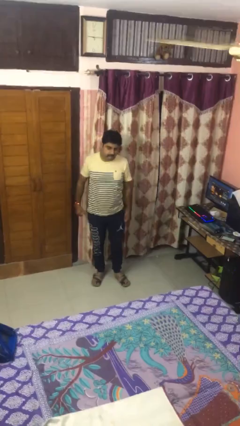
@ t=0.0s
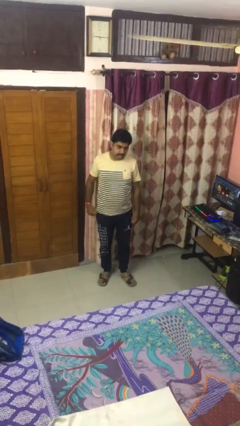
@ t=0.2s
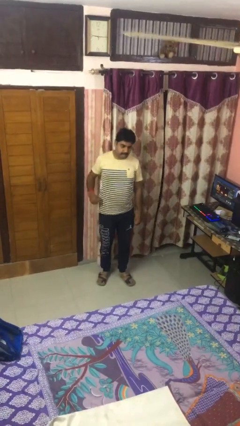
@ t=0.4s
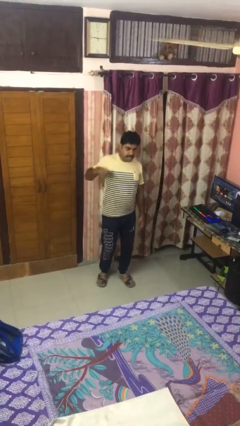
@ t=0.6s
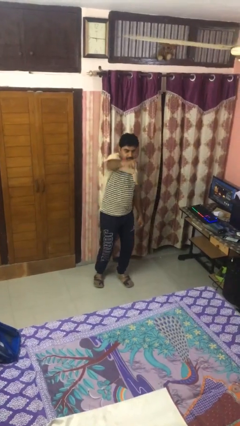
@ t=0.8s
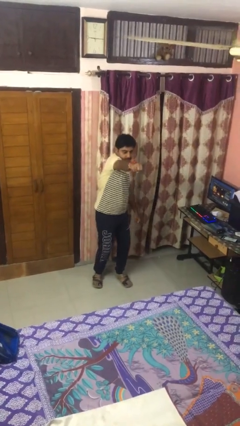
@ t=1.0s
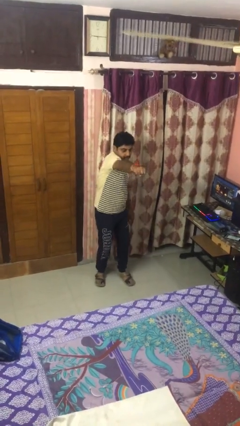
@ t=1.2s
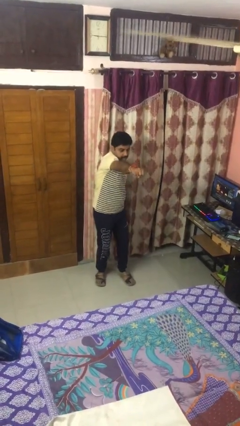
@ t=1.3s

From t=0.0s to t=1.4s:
person punches

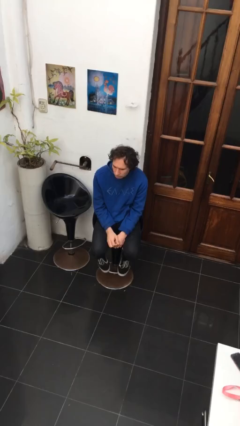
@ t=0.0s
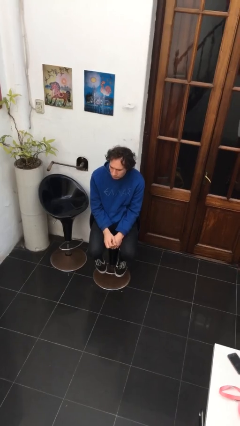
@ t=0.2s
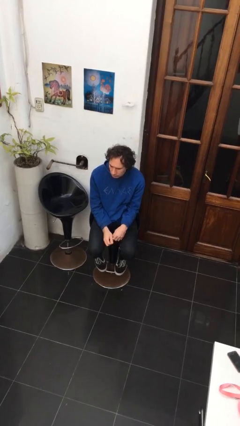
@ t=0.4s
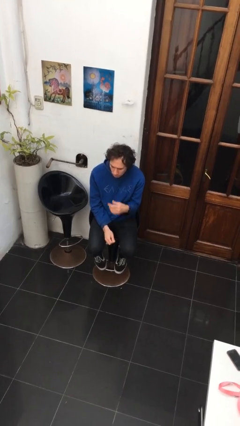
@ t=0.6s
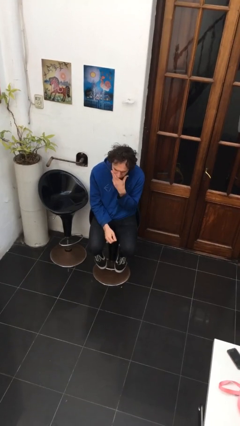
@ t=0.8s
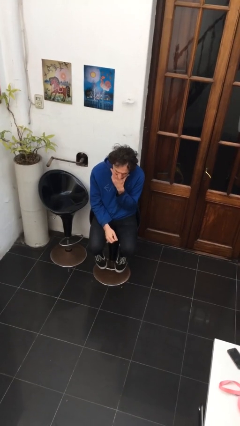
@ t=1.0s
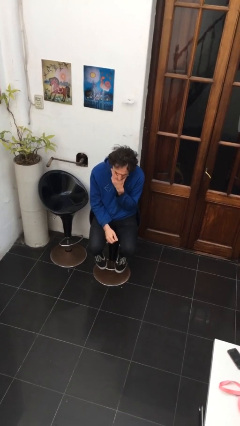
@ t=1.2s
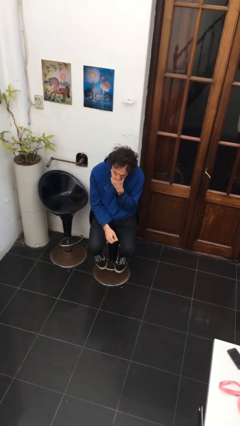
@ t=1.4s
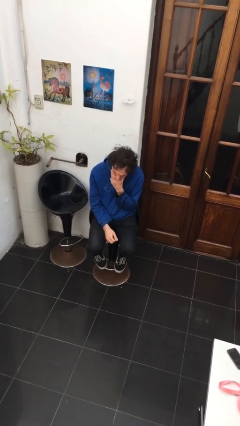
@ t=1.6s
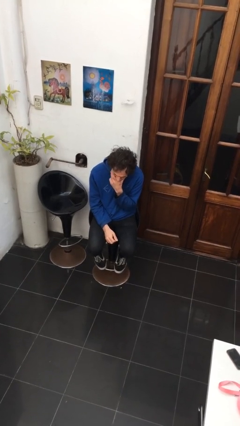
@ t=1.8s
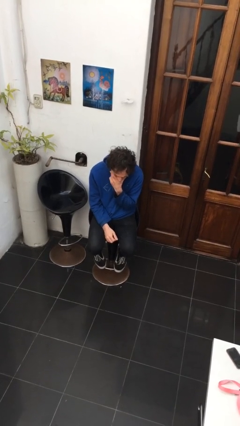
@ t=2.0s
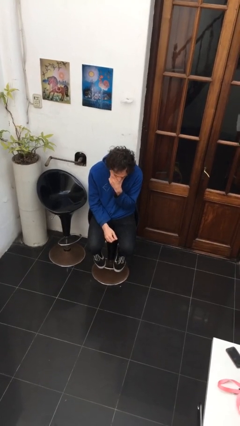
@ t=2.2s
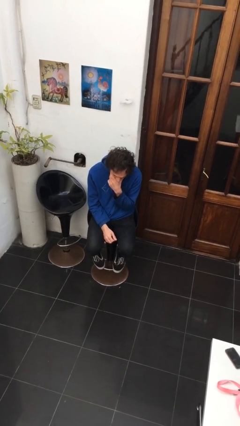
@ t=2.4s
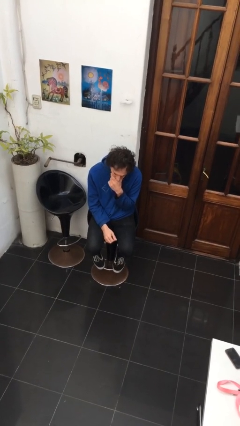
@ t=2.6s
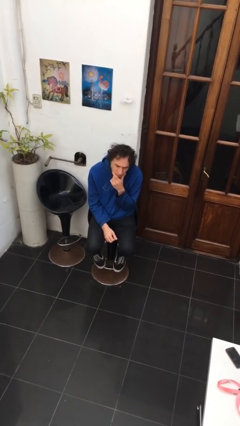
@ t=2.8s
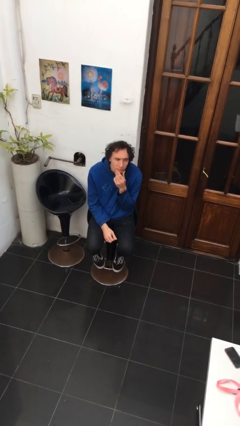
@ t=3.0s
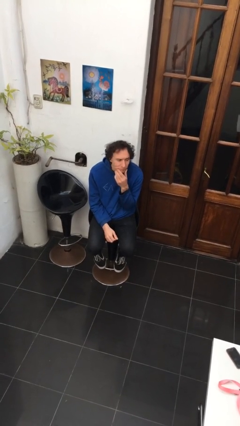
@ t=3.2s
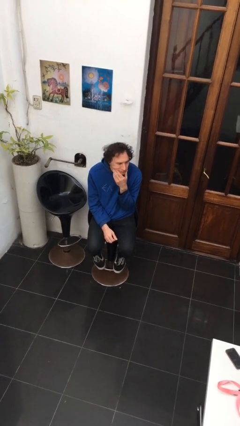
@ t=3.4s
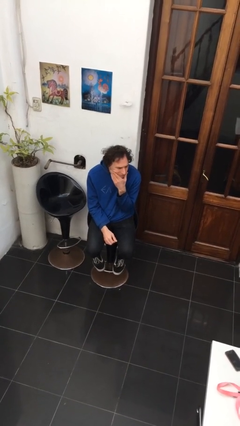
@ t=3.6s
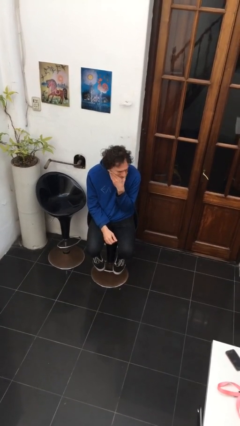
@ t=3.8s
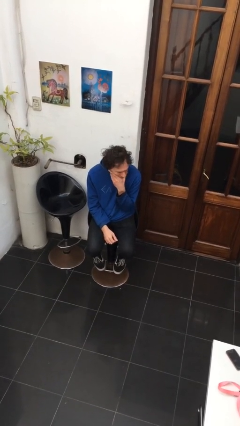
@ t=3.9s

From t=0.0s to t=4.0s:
person strokes chin

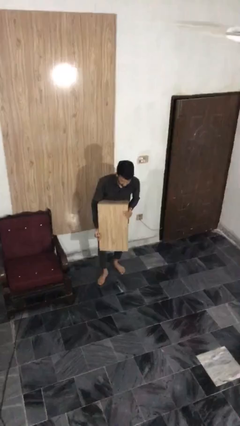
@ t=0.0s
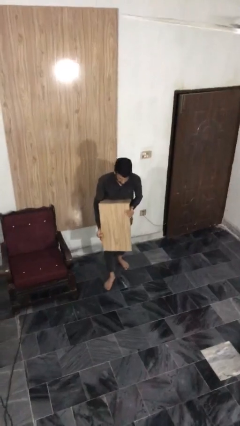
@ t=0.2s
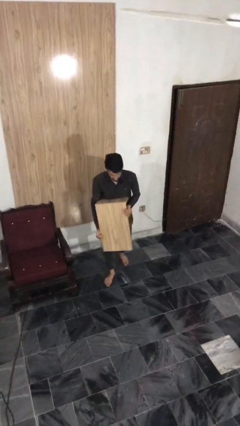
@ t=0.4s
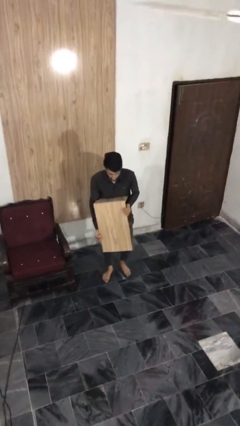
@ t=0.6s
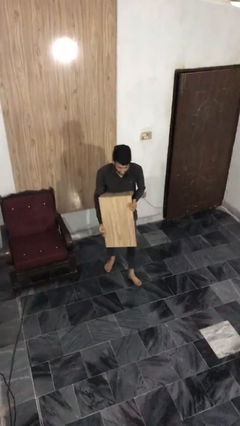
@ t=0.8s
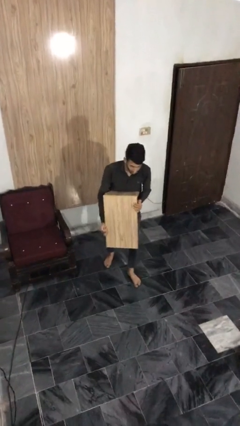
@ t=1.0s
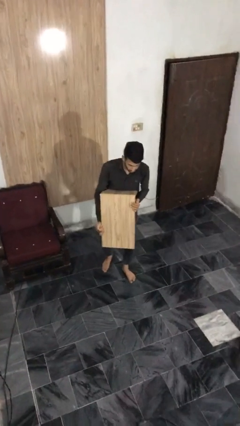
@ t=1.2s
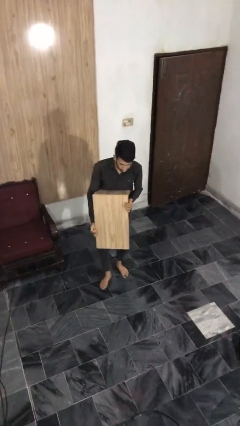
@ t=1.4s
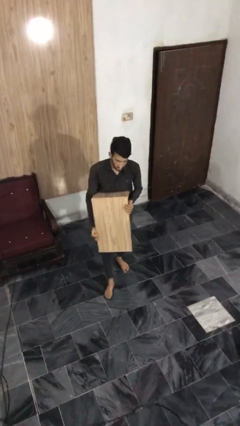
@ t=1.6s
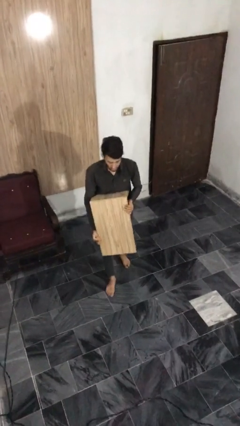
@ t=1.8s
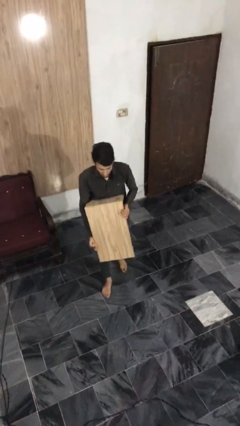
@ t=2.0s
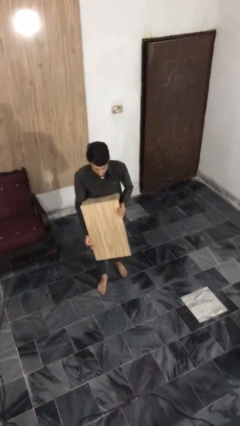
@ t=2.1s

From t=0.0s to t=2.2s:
person carries heavy object

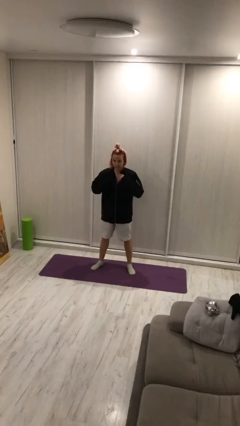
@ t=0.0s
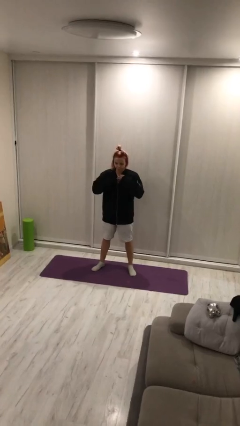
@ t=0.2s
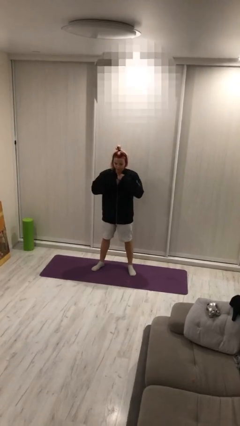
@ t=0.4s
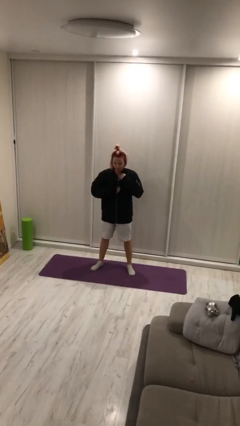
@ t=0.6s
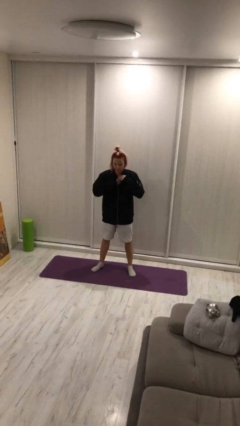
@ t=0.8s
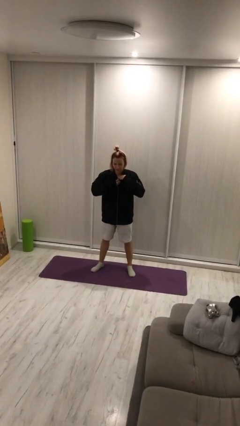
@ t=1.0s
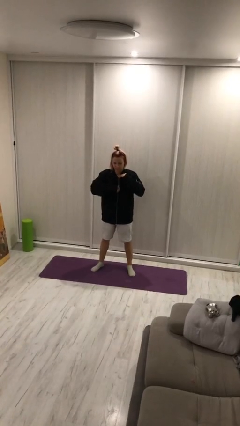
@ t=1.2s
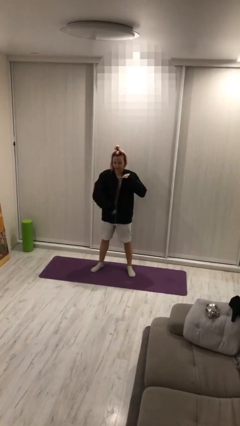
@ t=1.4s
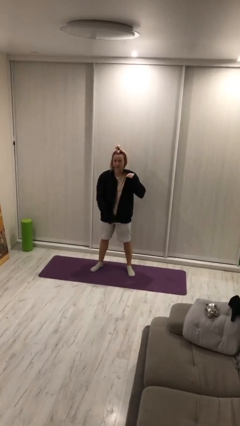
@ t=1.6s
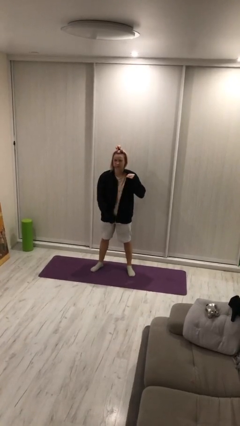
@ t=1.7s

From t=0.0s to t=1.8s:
person unzips jacket

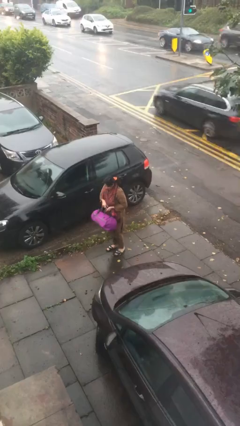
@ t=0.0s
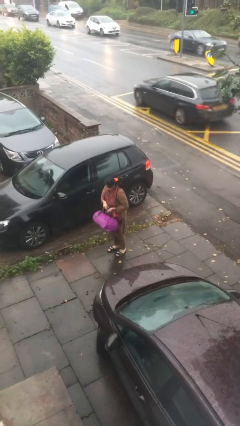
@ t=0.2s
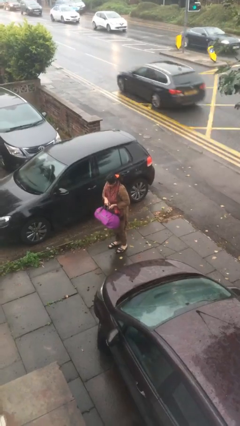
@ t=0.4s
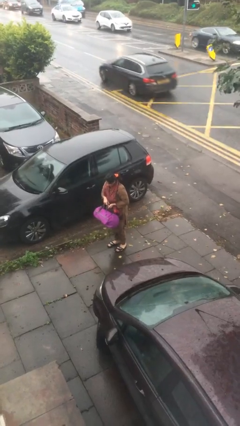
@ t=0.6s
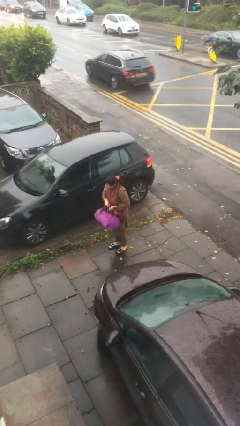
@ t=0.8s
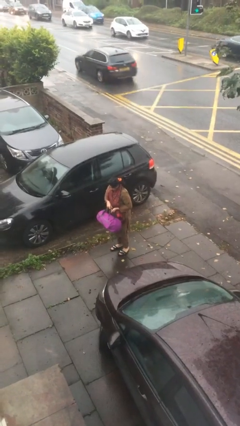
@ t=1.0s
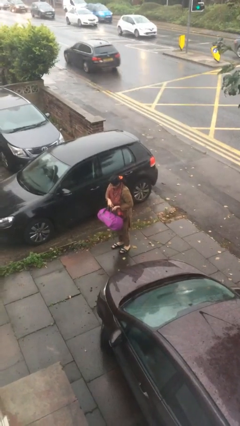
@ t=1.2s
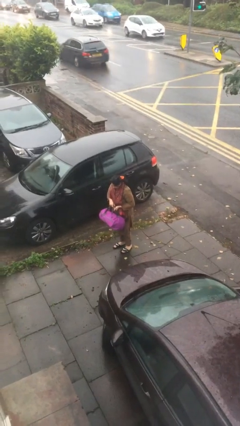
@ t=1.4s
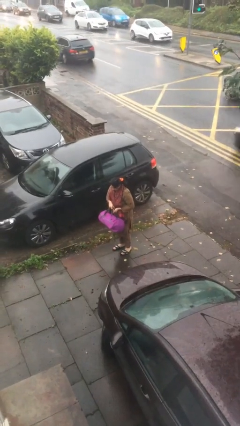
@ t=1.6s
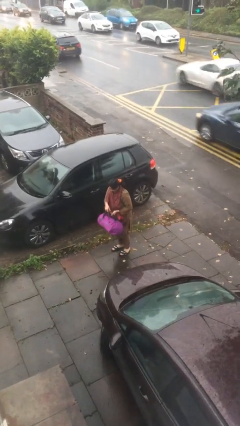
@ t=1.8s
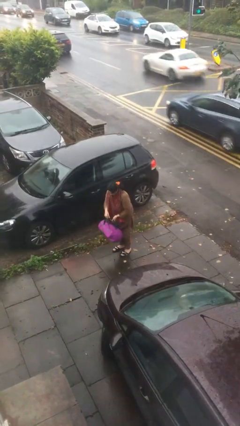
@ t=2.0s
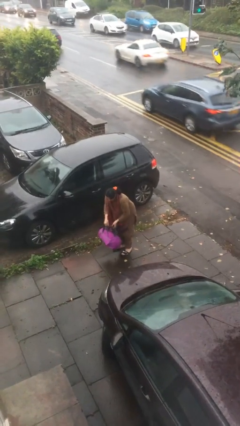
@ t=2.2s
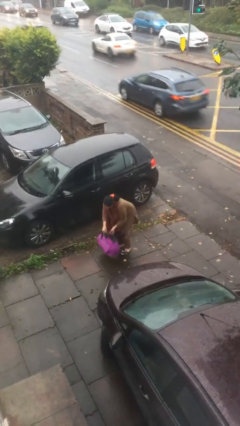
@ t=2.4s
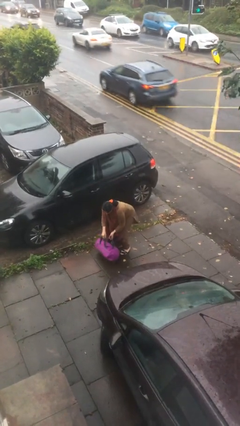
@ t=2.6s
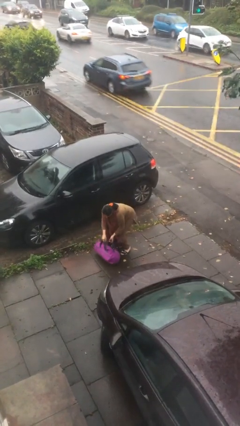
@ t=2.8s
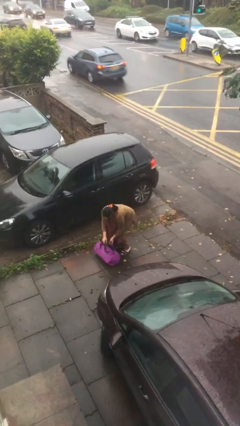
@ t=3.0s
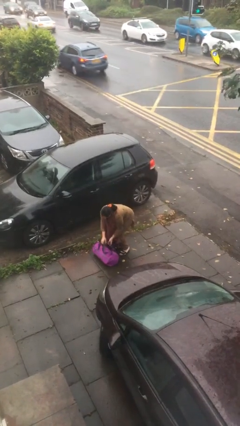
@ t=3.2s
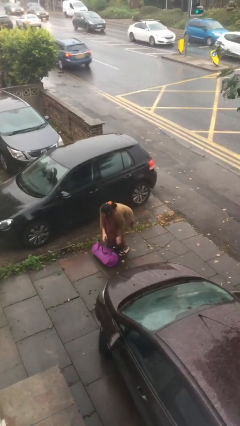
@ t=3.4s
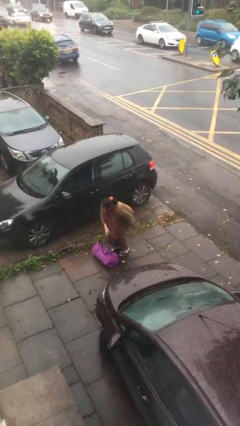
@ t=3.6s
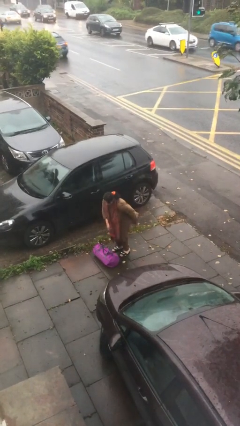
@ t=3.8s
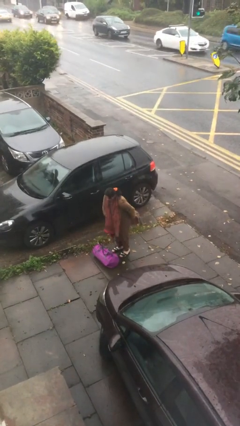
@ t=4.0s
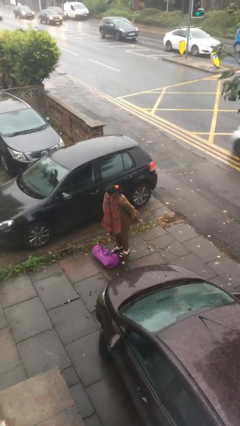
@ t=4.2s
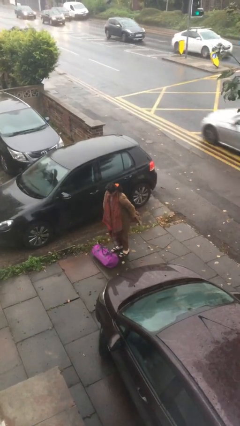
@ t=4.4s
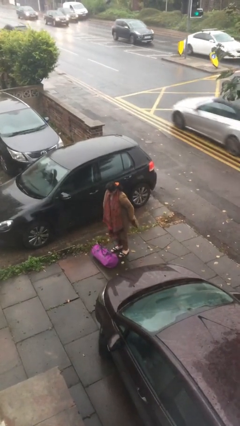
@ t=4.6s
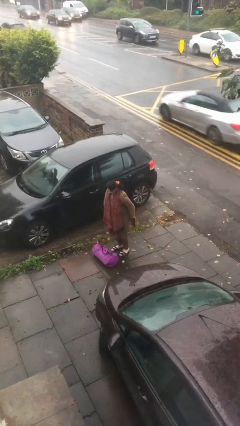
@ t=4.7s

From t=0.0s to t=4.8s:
person puts down object on floor

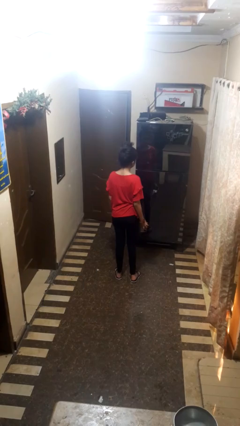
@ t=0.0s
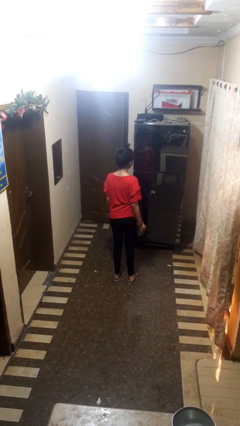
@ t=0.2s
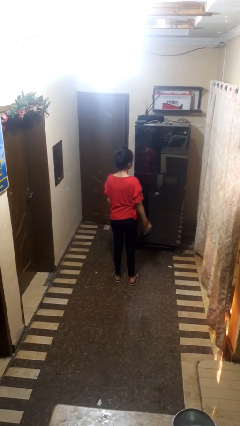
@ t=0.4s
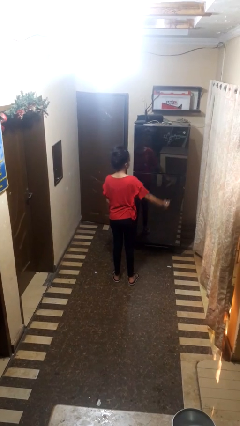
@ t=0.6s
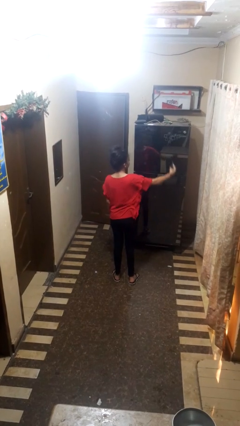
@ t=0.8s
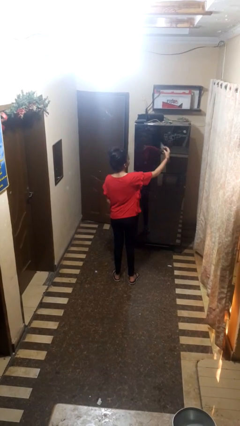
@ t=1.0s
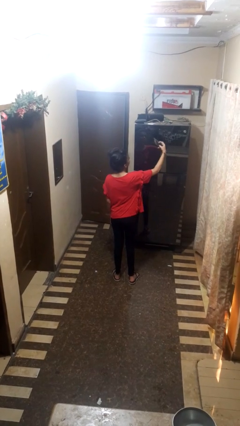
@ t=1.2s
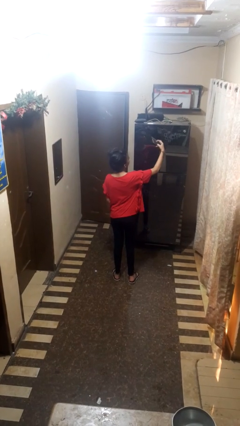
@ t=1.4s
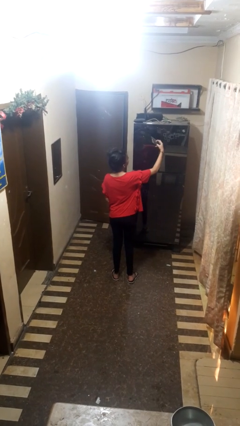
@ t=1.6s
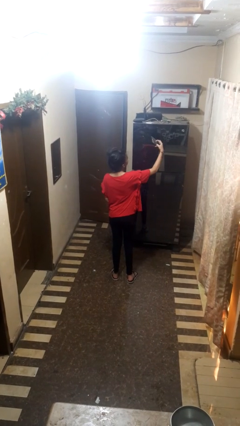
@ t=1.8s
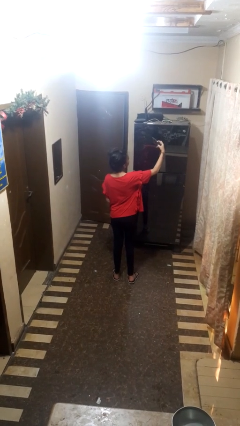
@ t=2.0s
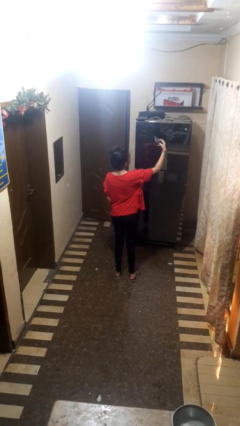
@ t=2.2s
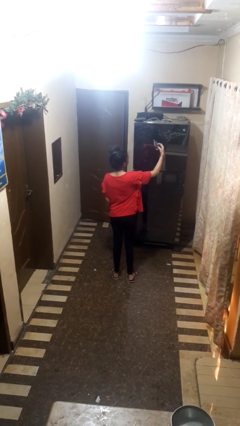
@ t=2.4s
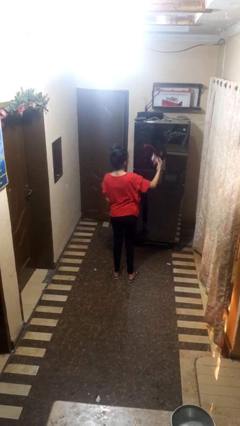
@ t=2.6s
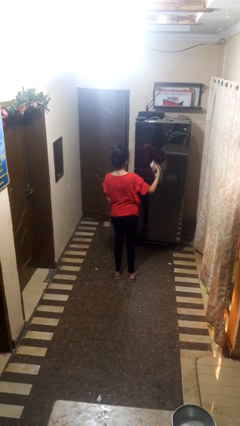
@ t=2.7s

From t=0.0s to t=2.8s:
person takes selfie
